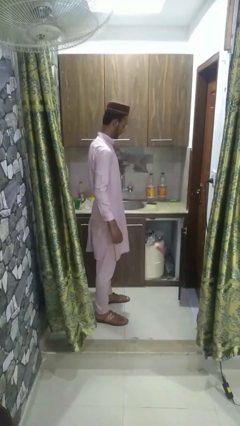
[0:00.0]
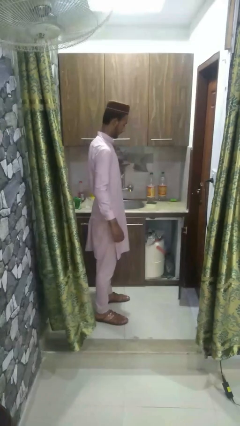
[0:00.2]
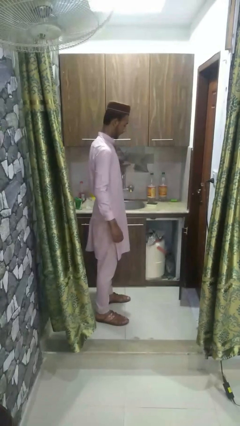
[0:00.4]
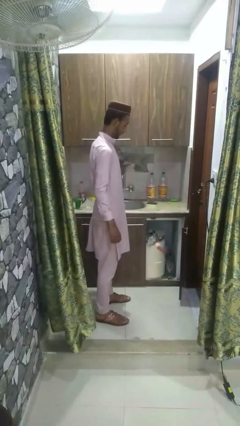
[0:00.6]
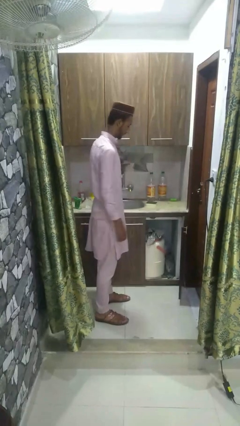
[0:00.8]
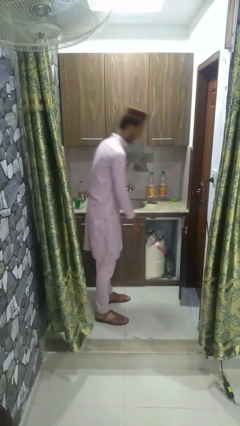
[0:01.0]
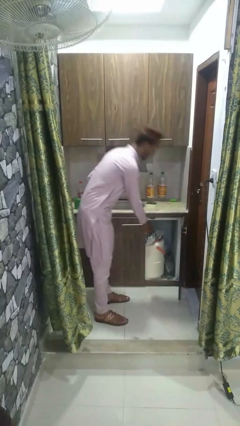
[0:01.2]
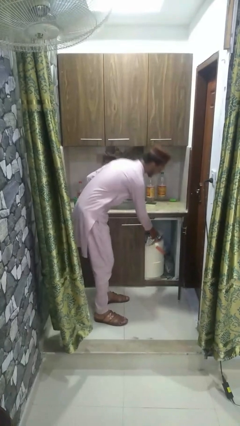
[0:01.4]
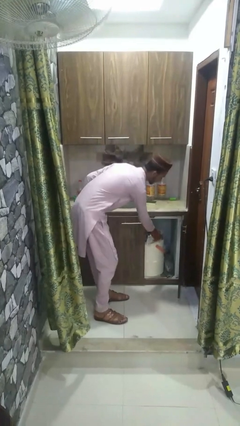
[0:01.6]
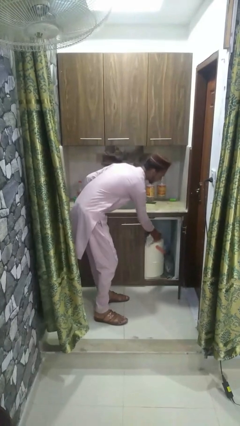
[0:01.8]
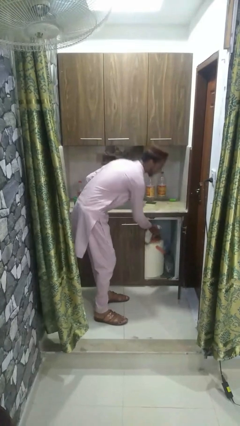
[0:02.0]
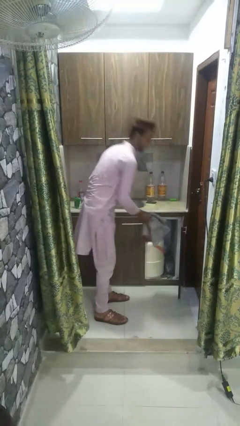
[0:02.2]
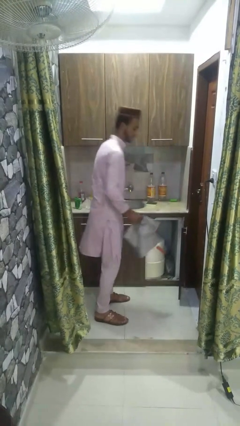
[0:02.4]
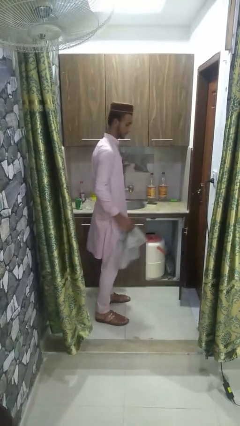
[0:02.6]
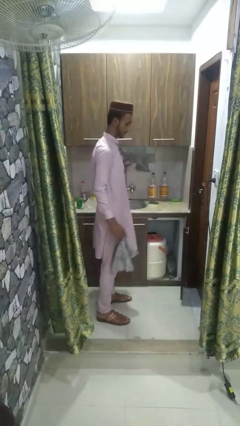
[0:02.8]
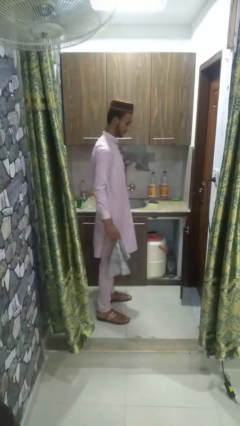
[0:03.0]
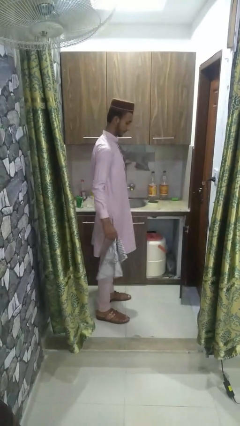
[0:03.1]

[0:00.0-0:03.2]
person unloads clotheswasher

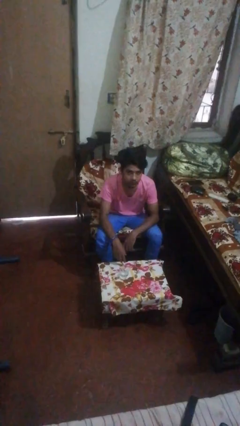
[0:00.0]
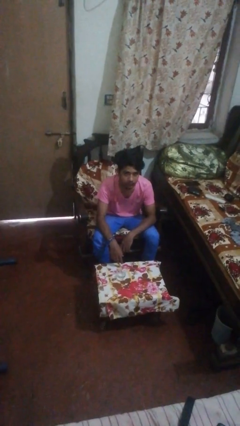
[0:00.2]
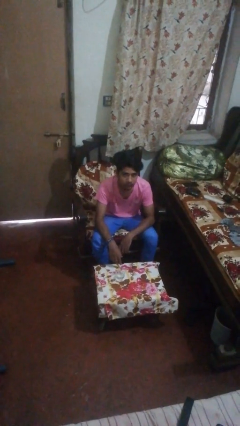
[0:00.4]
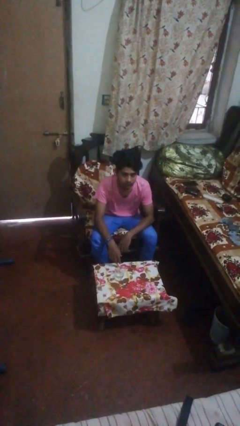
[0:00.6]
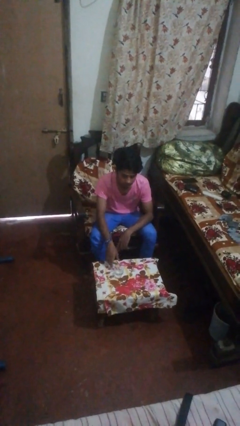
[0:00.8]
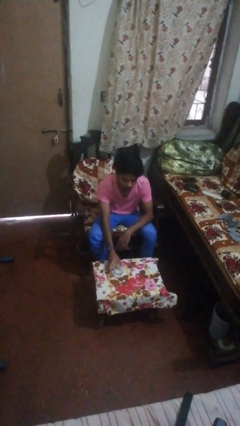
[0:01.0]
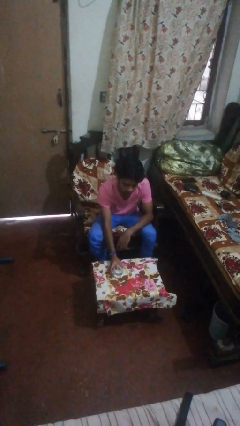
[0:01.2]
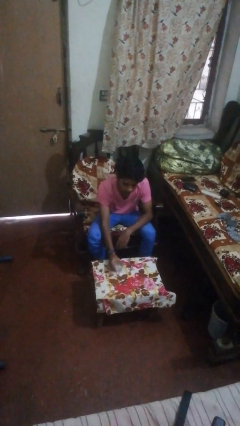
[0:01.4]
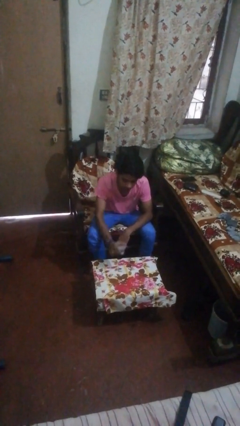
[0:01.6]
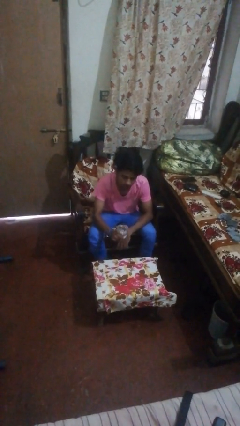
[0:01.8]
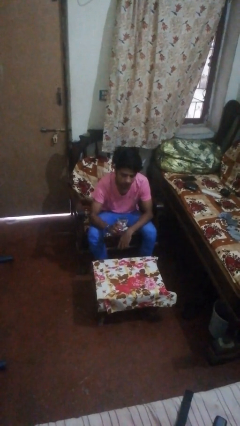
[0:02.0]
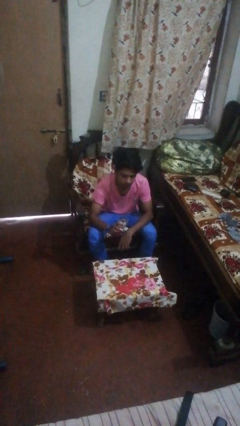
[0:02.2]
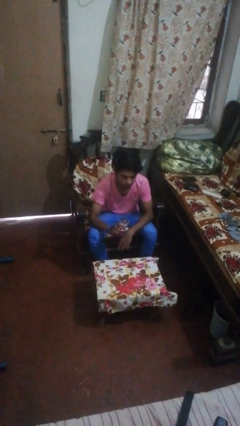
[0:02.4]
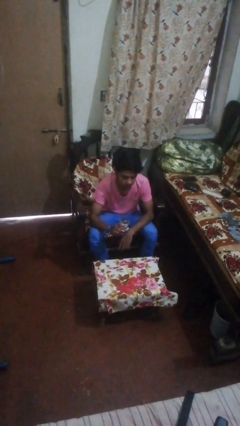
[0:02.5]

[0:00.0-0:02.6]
person picks up object from table

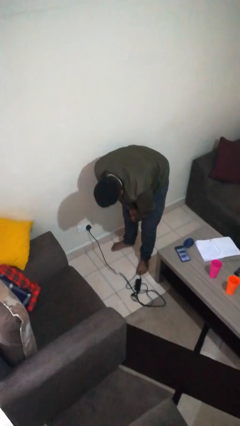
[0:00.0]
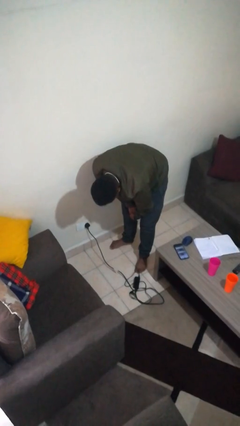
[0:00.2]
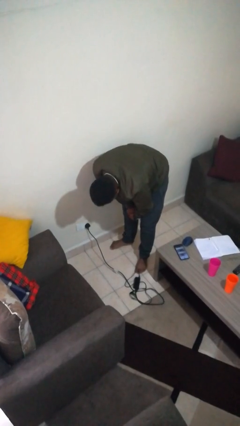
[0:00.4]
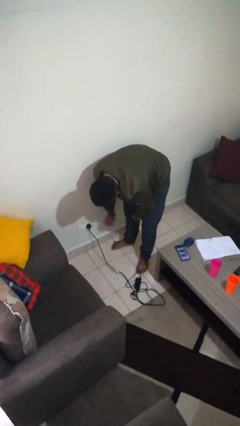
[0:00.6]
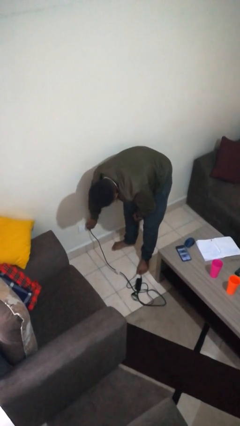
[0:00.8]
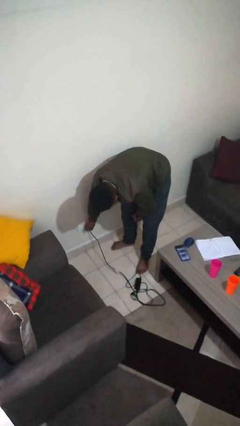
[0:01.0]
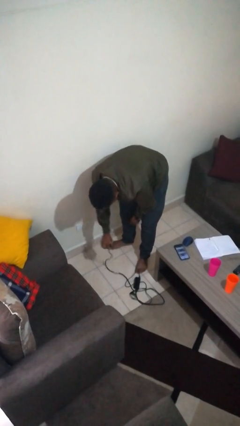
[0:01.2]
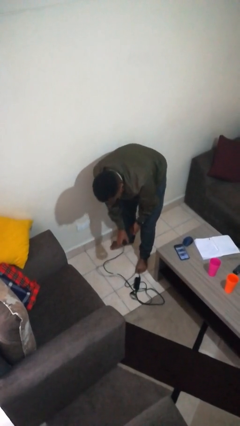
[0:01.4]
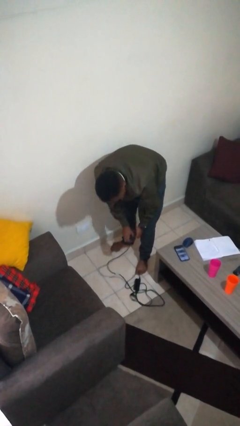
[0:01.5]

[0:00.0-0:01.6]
person unplugs from electrical socket

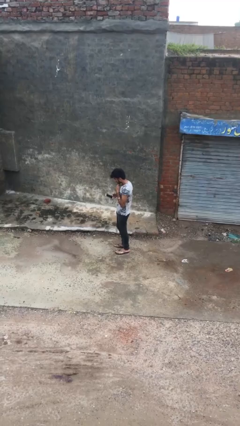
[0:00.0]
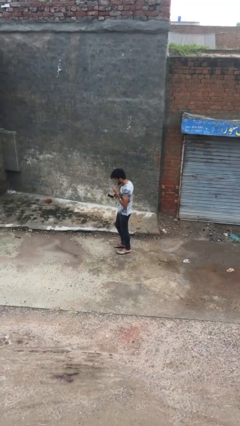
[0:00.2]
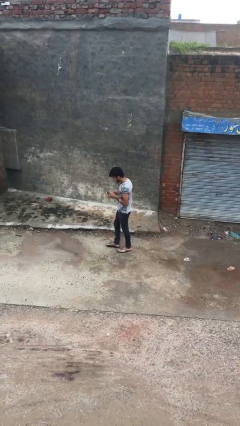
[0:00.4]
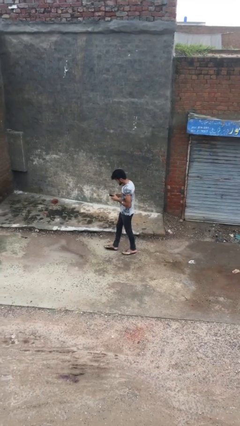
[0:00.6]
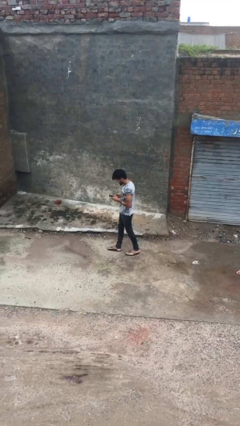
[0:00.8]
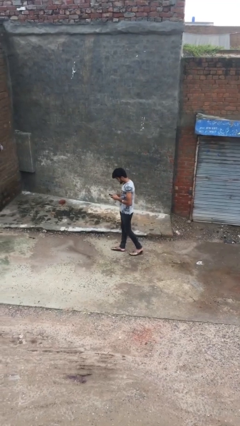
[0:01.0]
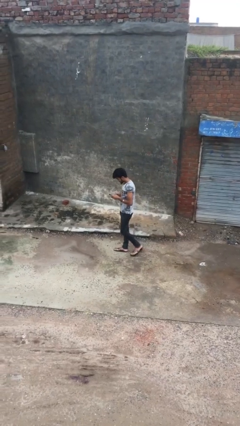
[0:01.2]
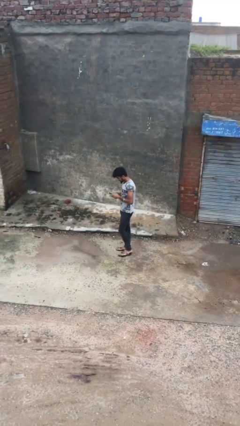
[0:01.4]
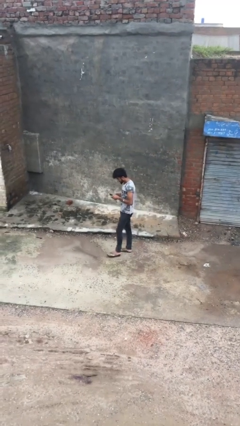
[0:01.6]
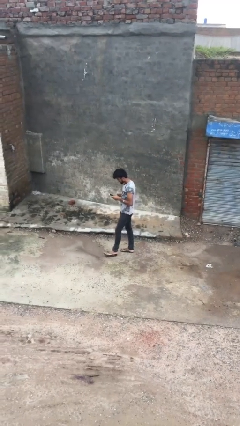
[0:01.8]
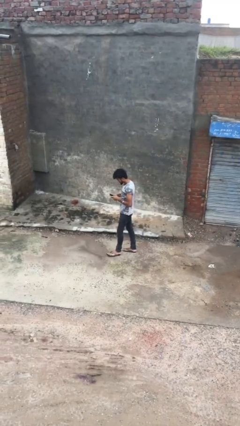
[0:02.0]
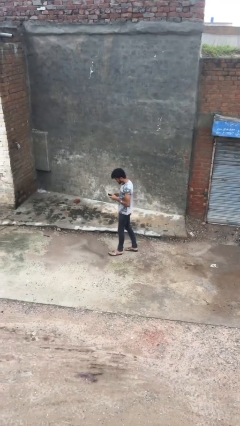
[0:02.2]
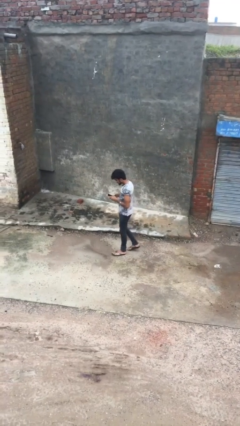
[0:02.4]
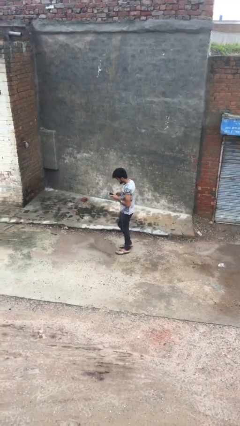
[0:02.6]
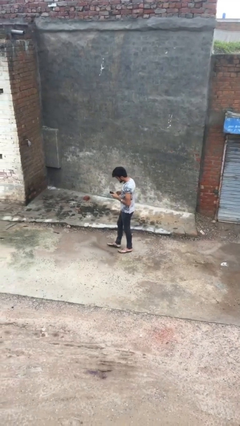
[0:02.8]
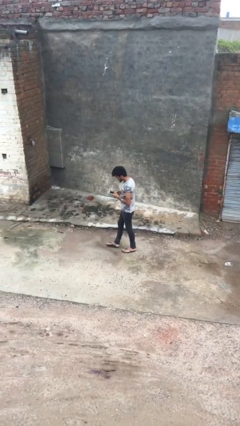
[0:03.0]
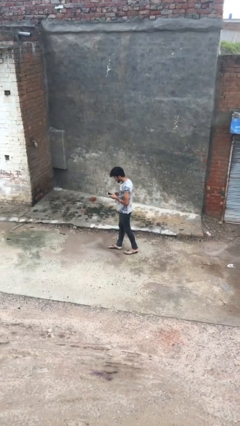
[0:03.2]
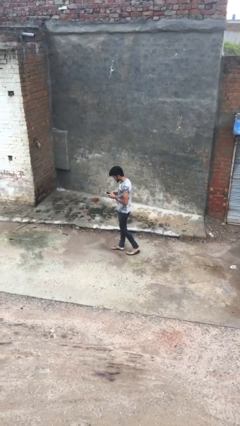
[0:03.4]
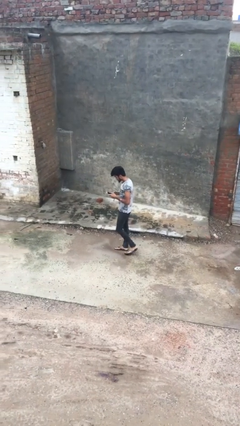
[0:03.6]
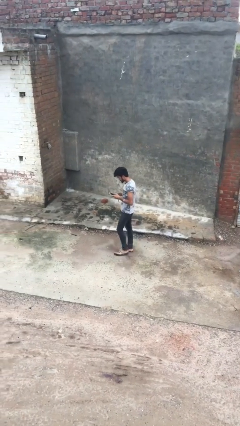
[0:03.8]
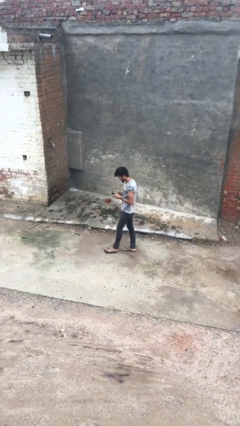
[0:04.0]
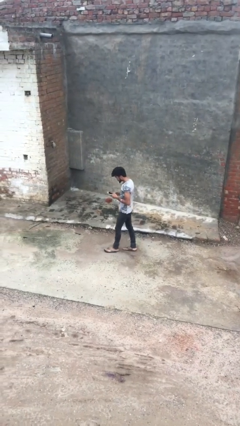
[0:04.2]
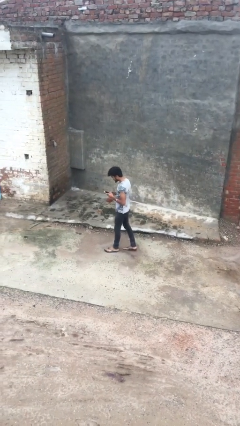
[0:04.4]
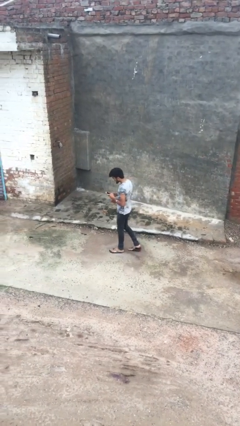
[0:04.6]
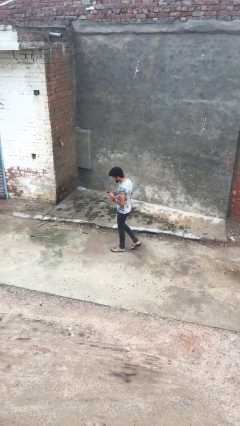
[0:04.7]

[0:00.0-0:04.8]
person texts on phone

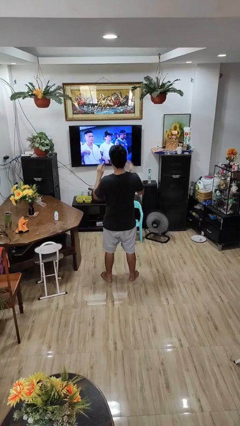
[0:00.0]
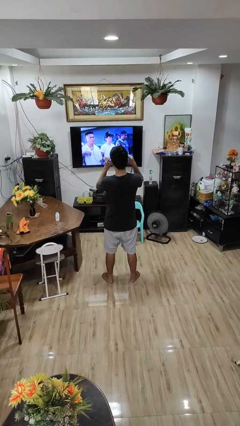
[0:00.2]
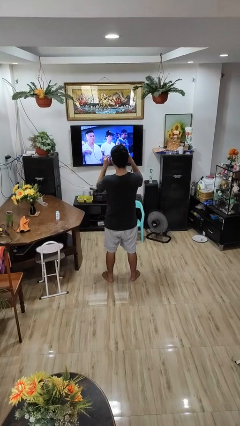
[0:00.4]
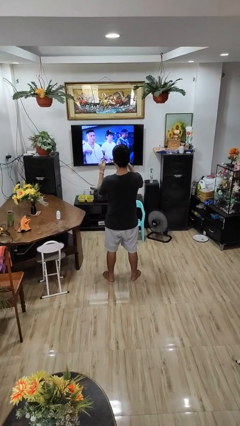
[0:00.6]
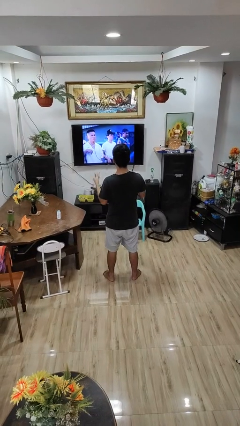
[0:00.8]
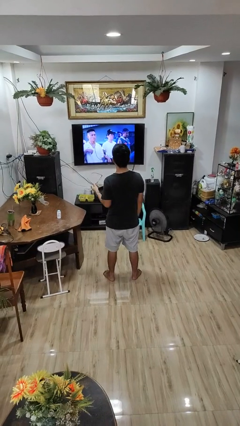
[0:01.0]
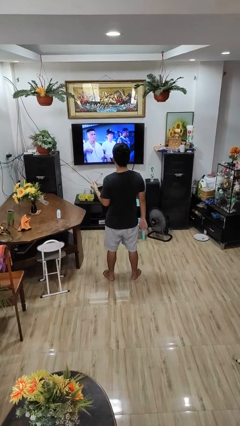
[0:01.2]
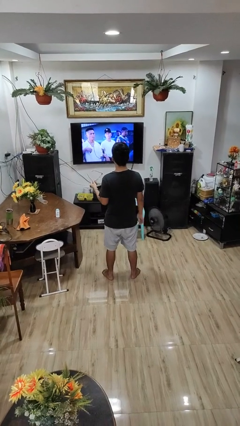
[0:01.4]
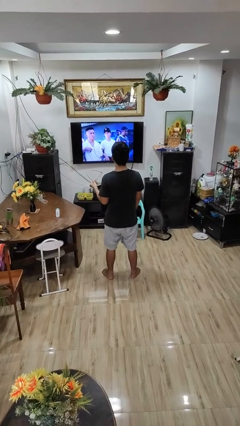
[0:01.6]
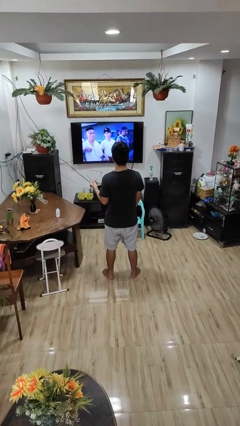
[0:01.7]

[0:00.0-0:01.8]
person takes off glasses

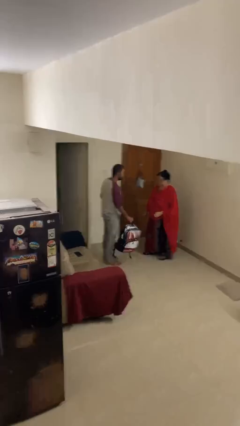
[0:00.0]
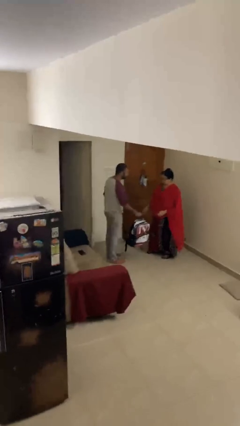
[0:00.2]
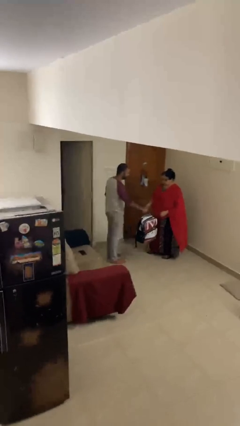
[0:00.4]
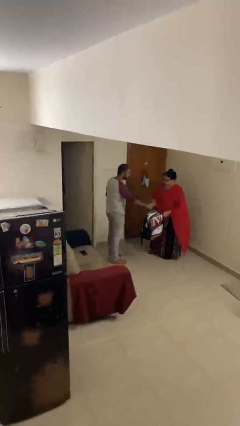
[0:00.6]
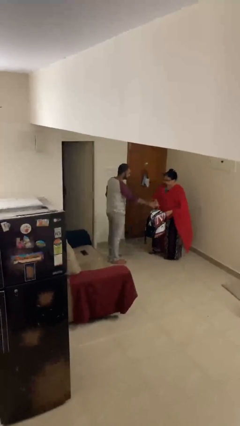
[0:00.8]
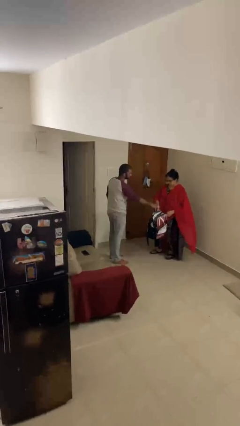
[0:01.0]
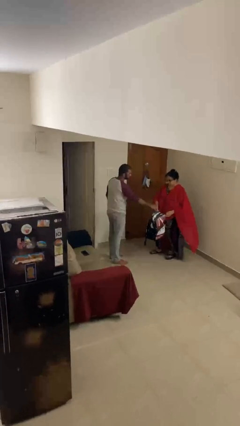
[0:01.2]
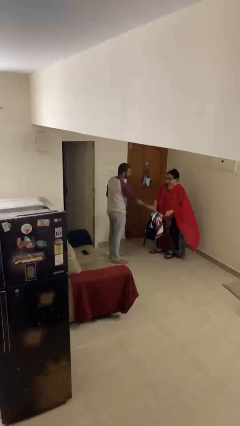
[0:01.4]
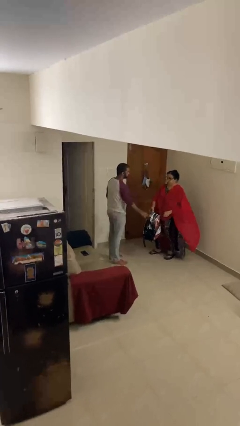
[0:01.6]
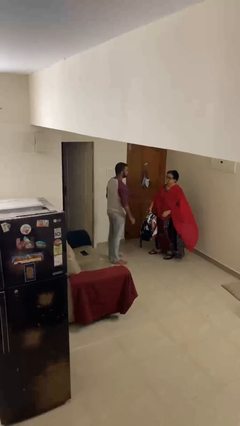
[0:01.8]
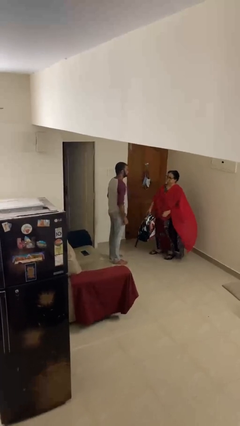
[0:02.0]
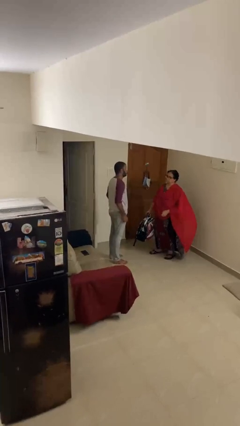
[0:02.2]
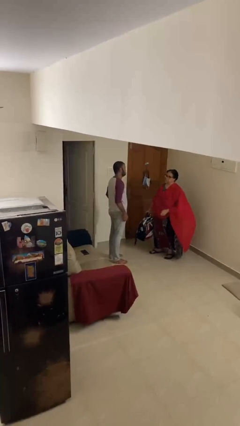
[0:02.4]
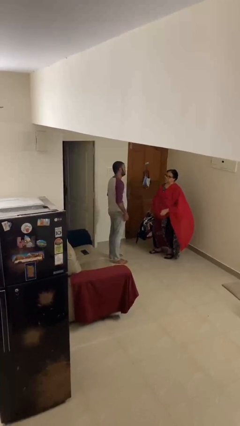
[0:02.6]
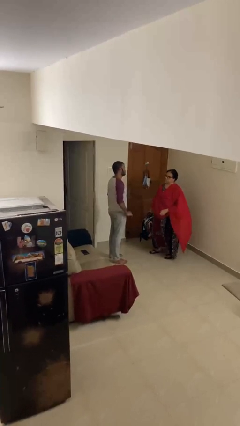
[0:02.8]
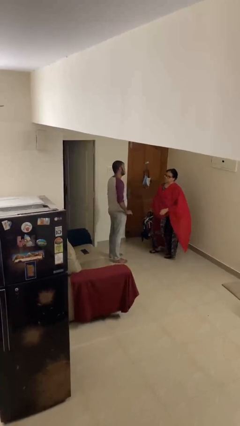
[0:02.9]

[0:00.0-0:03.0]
person transfers object to person

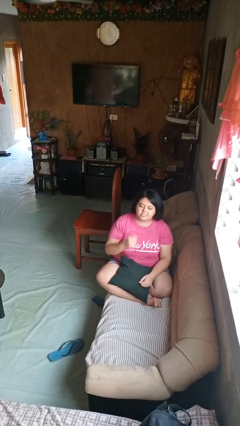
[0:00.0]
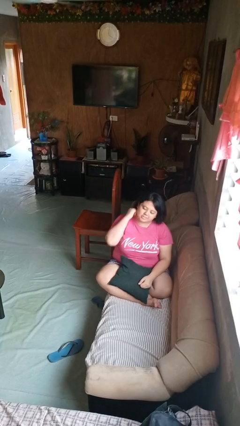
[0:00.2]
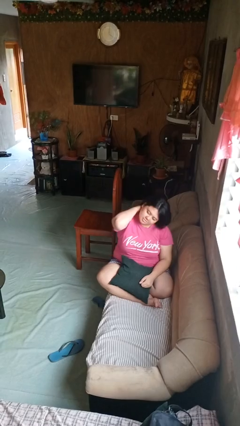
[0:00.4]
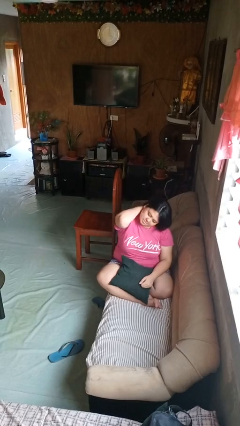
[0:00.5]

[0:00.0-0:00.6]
person rubs neck
